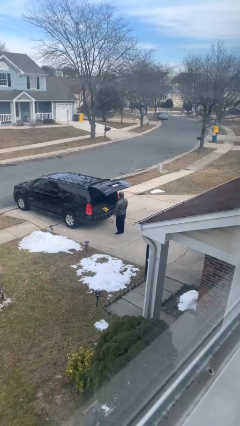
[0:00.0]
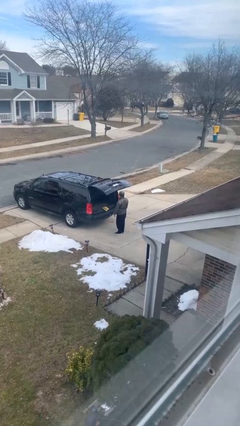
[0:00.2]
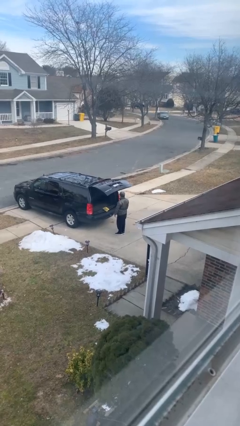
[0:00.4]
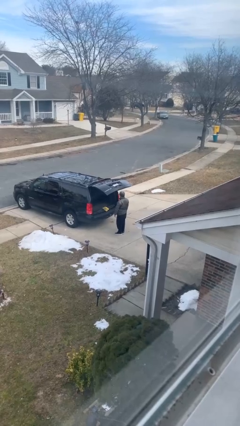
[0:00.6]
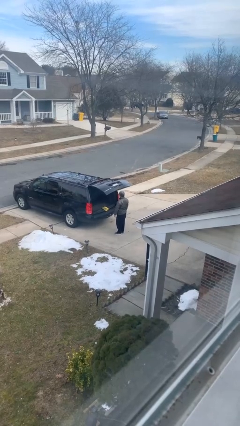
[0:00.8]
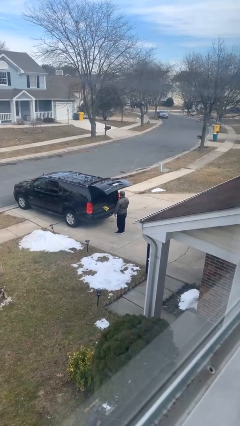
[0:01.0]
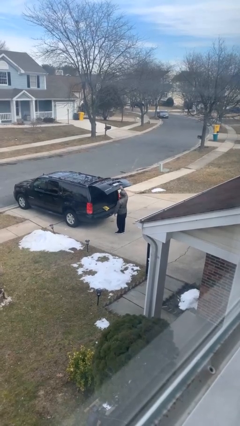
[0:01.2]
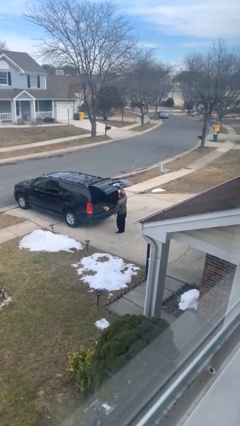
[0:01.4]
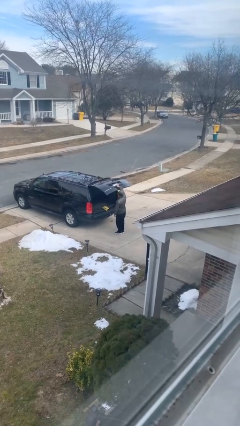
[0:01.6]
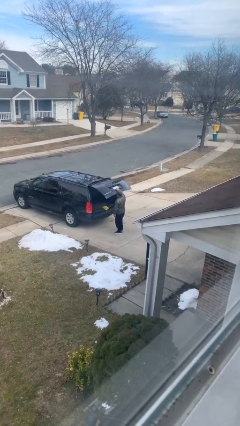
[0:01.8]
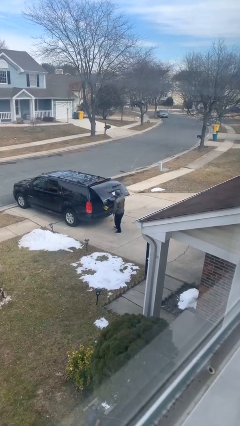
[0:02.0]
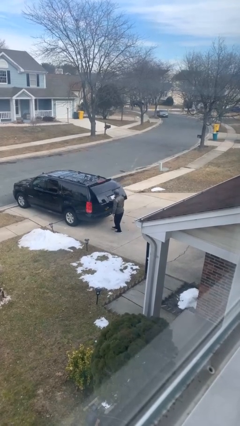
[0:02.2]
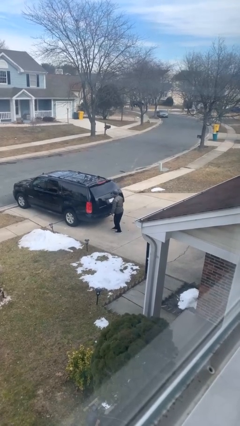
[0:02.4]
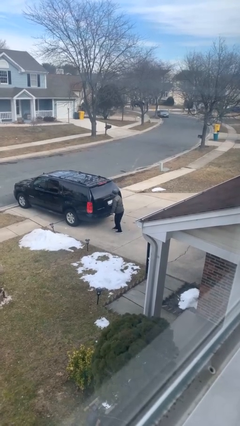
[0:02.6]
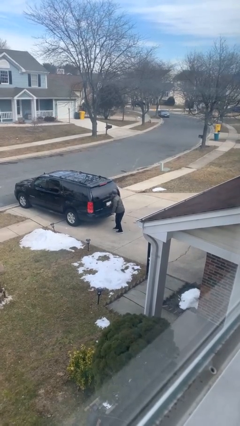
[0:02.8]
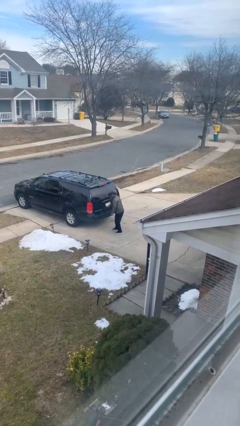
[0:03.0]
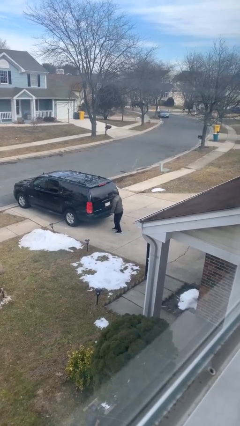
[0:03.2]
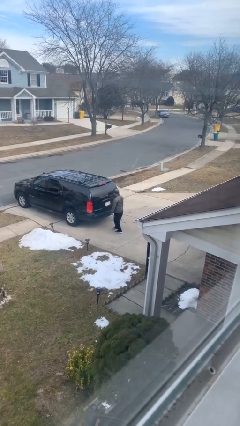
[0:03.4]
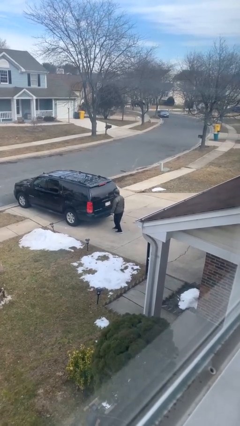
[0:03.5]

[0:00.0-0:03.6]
person closes car trunk

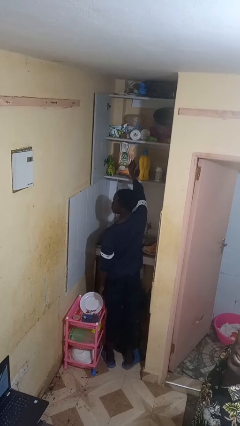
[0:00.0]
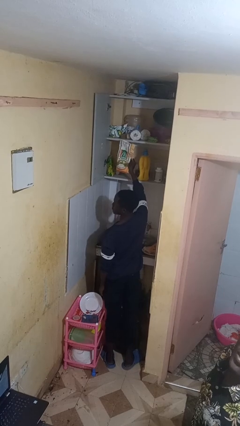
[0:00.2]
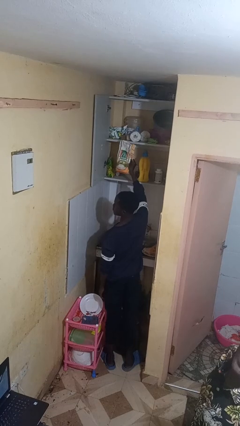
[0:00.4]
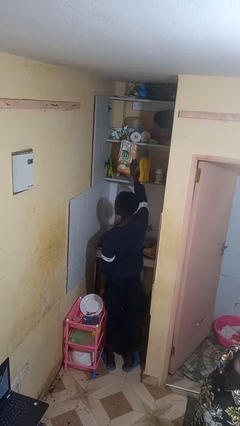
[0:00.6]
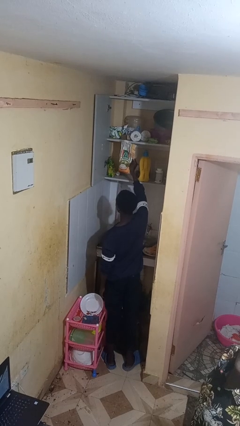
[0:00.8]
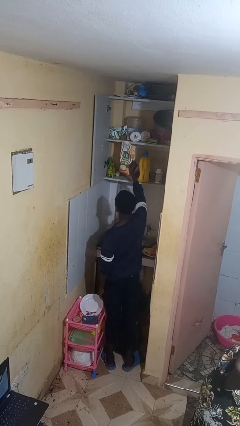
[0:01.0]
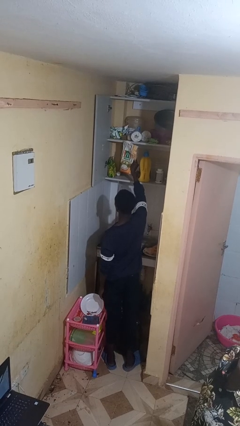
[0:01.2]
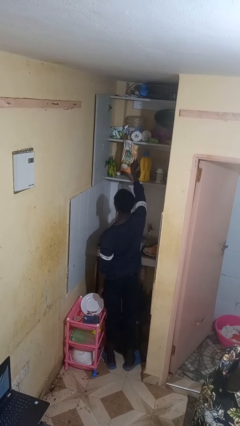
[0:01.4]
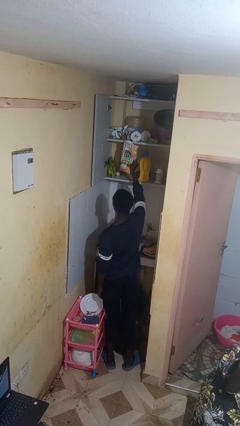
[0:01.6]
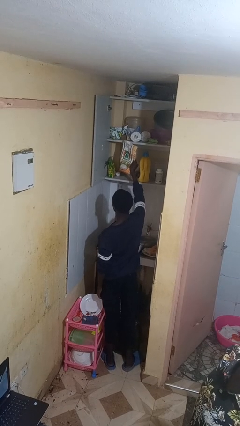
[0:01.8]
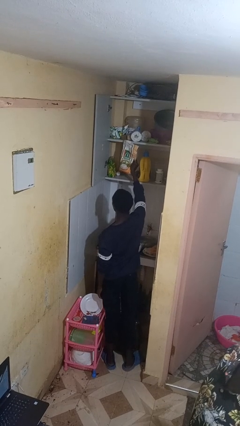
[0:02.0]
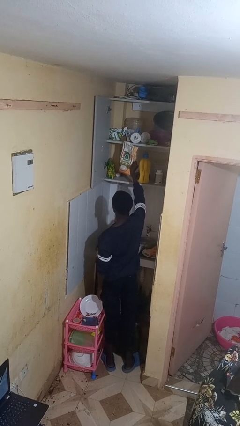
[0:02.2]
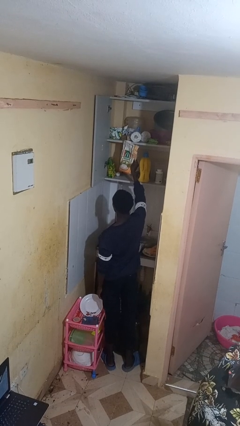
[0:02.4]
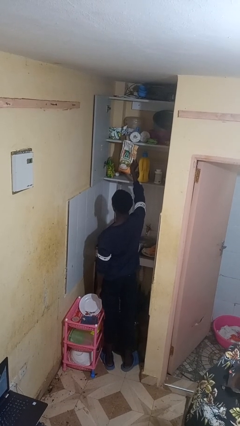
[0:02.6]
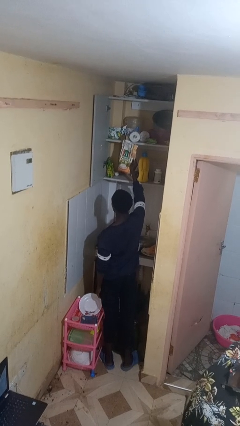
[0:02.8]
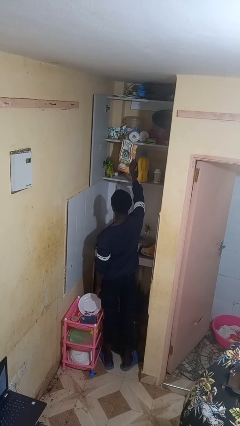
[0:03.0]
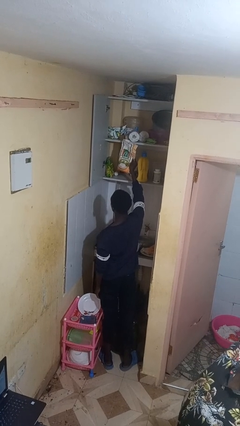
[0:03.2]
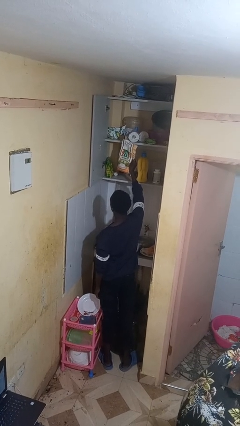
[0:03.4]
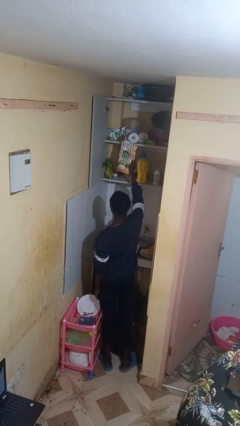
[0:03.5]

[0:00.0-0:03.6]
person takes object from cabinet

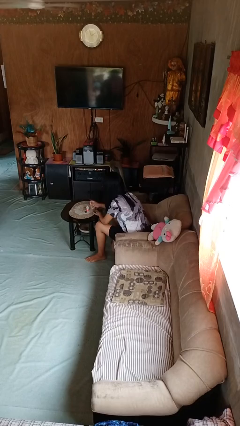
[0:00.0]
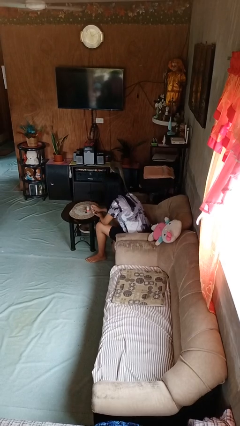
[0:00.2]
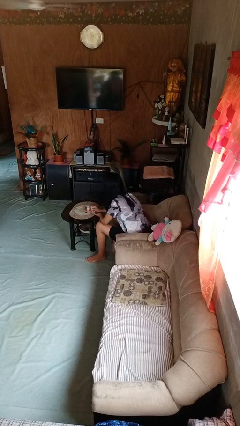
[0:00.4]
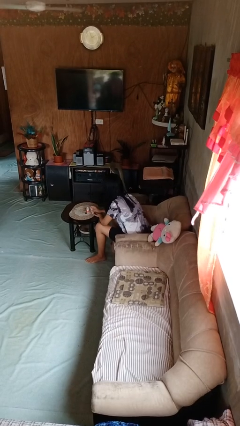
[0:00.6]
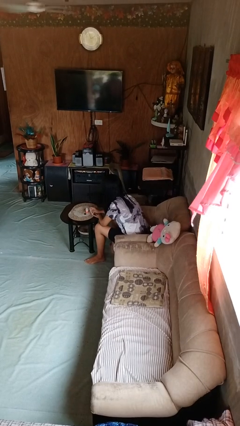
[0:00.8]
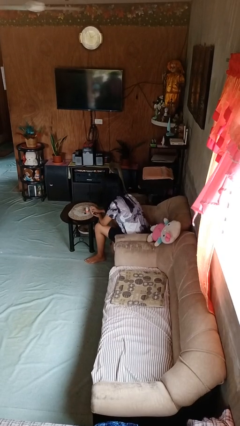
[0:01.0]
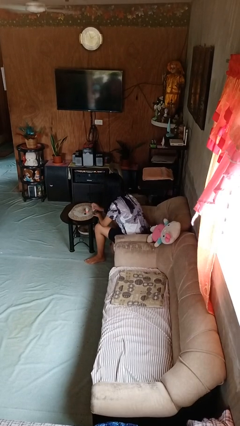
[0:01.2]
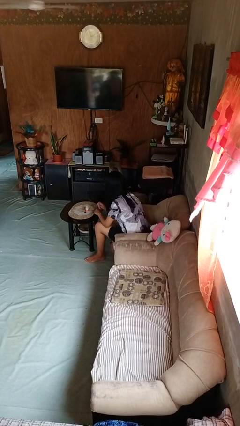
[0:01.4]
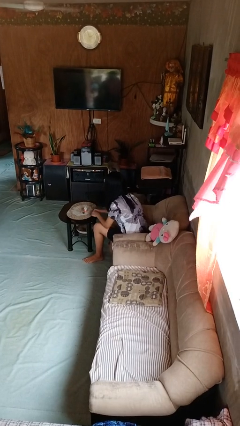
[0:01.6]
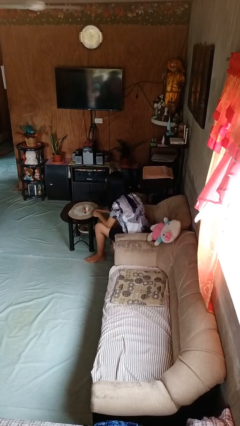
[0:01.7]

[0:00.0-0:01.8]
person paints fingernails

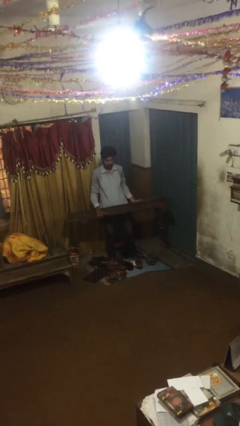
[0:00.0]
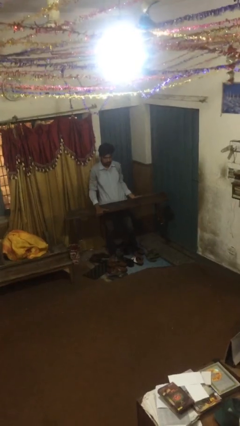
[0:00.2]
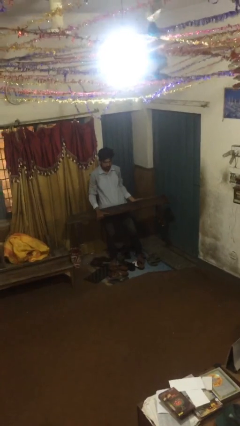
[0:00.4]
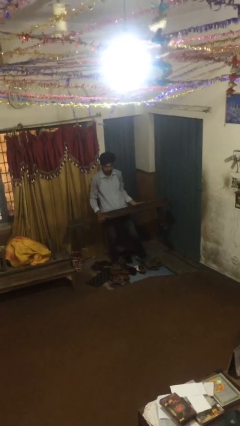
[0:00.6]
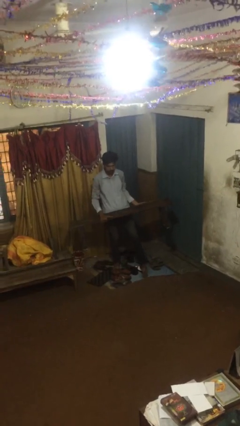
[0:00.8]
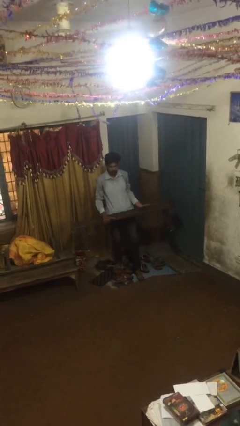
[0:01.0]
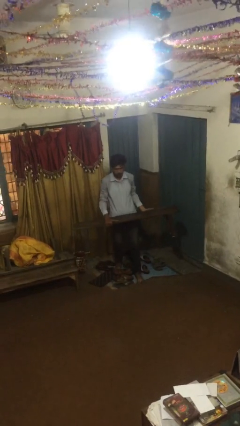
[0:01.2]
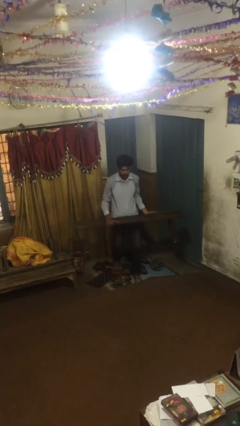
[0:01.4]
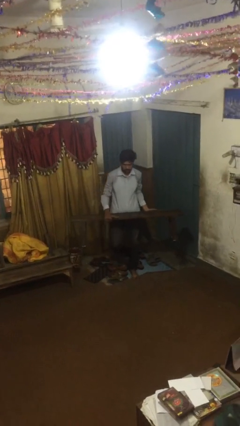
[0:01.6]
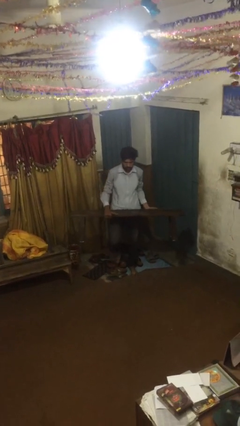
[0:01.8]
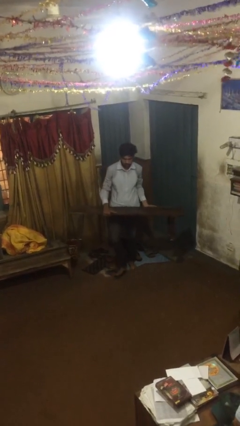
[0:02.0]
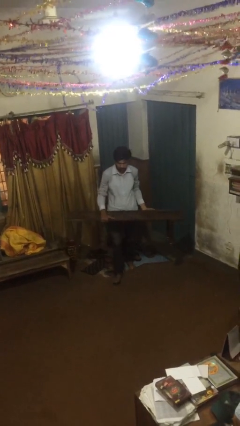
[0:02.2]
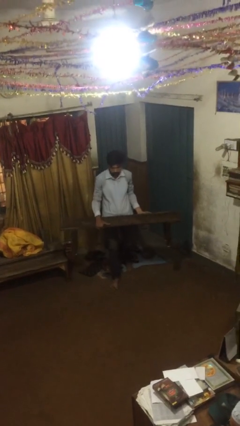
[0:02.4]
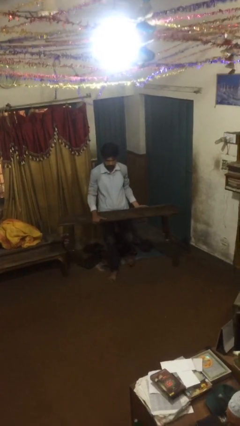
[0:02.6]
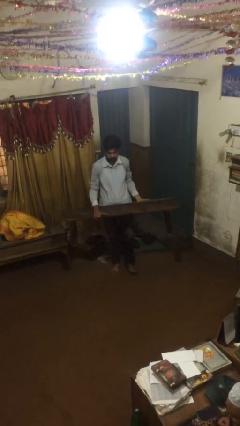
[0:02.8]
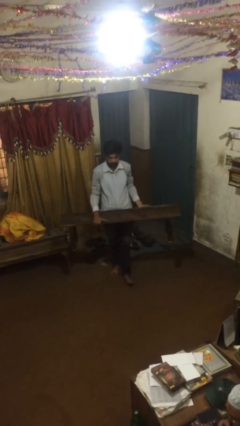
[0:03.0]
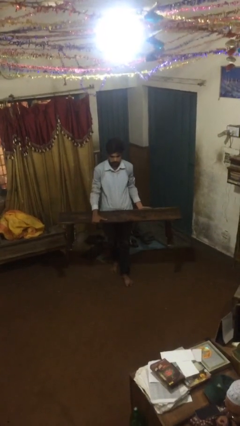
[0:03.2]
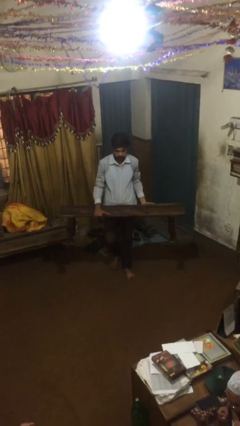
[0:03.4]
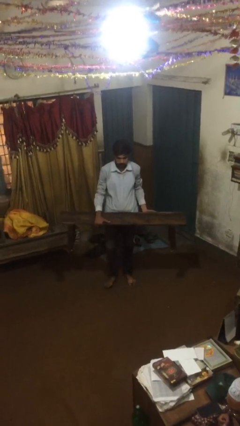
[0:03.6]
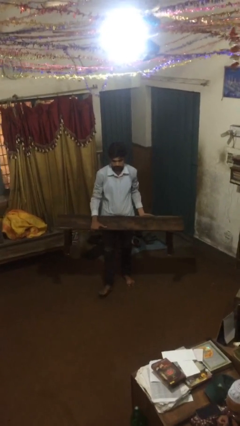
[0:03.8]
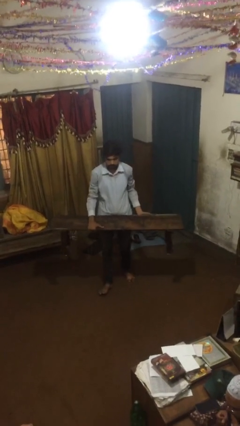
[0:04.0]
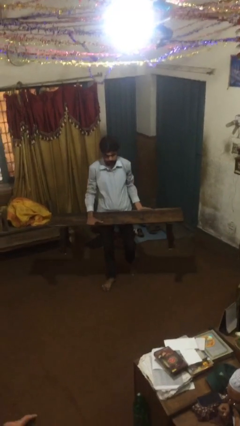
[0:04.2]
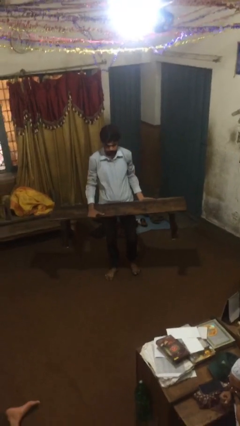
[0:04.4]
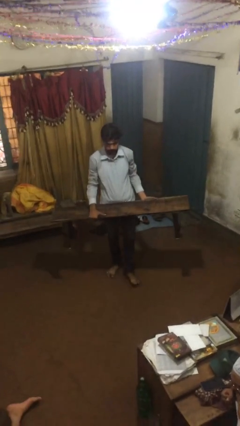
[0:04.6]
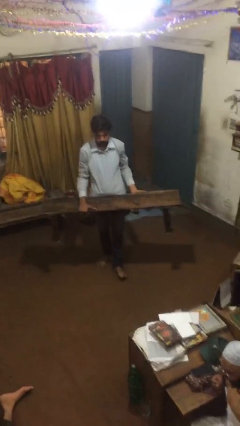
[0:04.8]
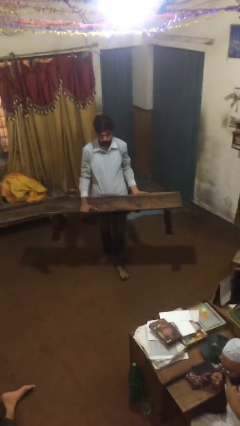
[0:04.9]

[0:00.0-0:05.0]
person carries heavy object

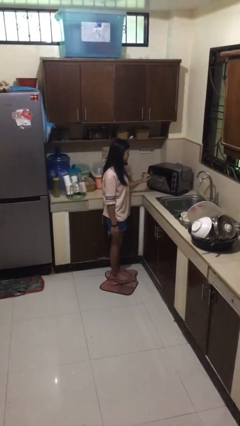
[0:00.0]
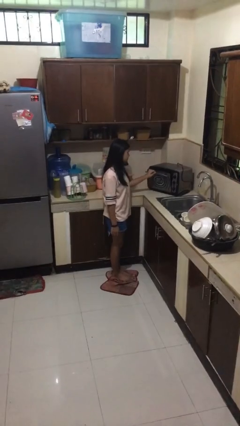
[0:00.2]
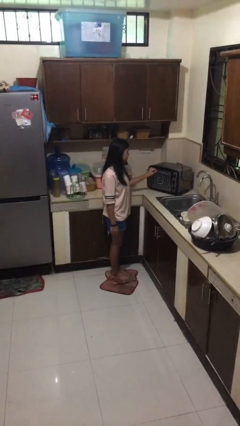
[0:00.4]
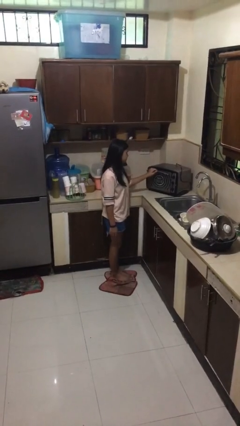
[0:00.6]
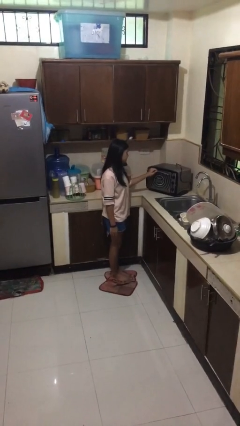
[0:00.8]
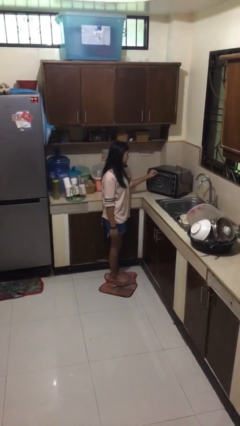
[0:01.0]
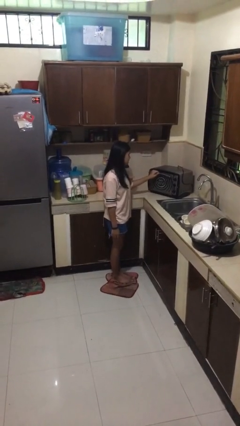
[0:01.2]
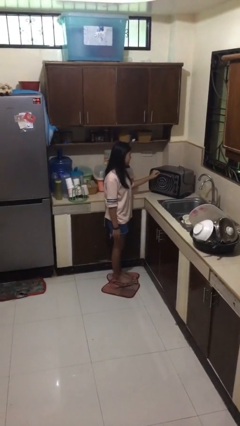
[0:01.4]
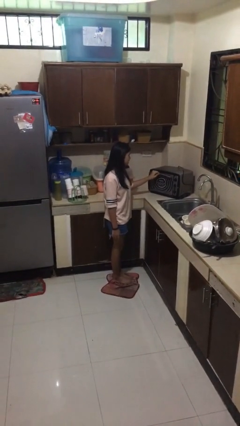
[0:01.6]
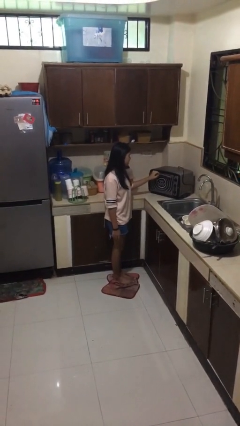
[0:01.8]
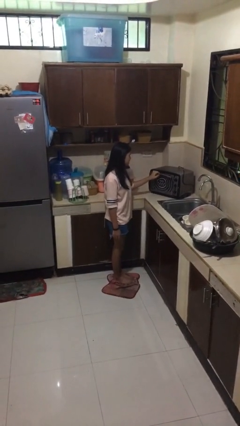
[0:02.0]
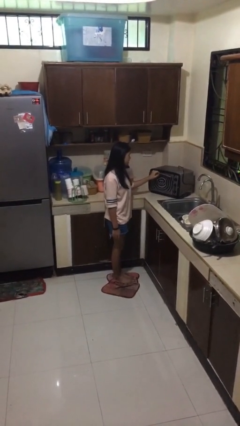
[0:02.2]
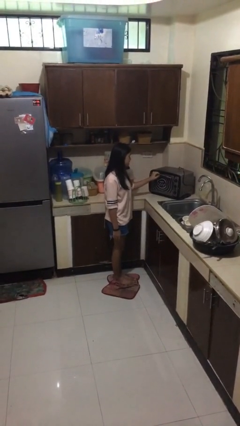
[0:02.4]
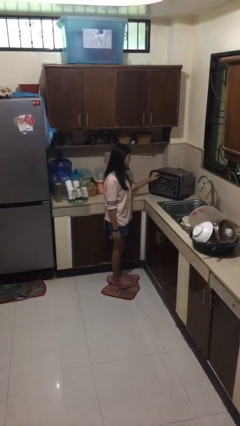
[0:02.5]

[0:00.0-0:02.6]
person closes microwave

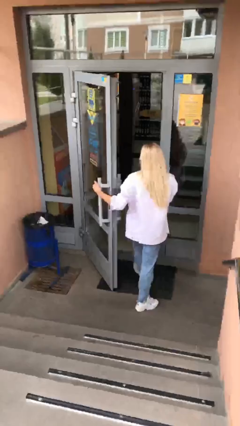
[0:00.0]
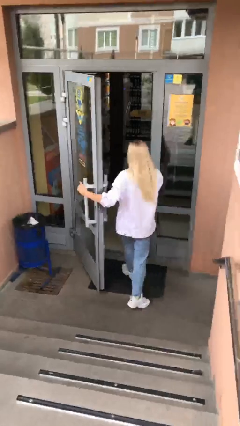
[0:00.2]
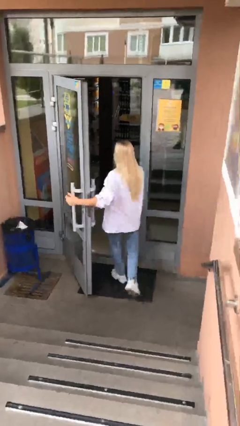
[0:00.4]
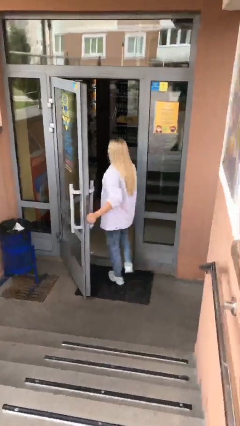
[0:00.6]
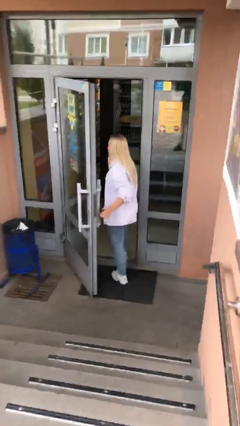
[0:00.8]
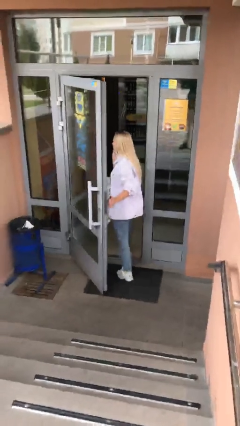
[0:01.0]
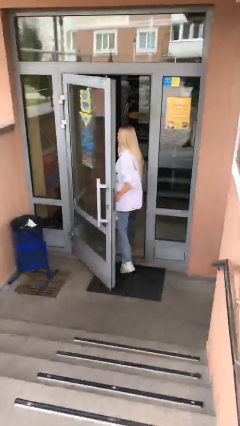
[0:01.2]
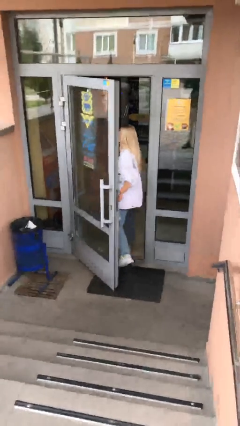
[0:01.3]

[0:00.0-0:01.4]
person exits scene through structure
